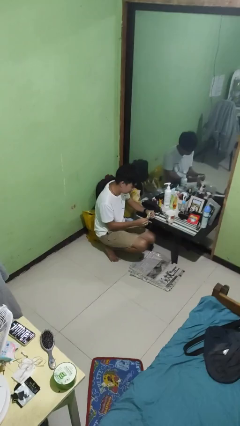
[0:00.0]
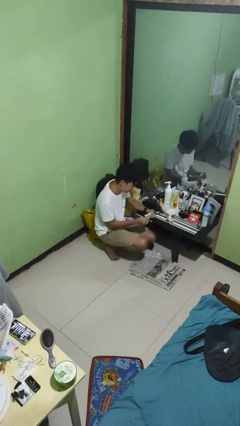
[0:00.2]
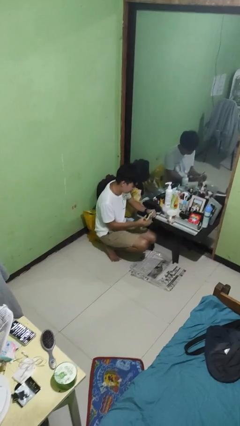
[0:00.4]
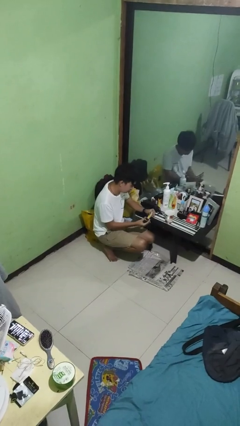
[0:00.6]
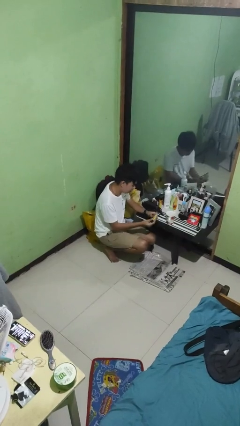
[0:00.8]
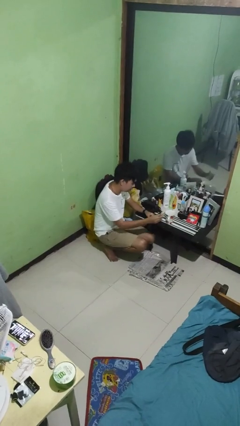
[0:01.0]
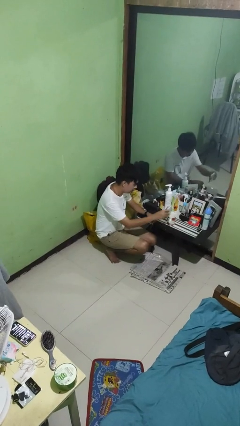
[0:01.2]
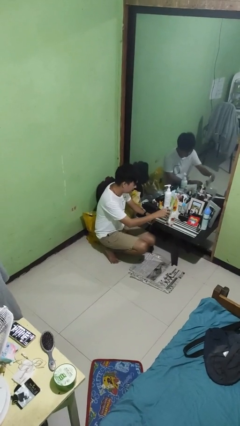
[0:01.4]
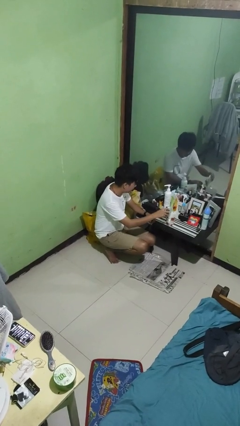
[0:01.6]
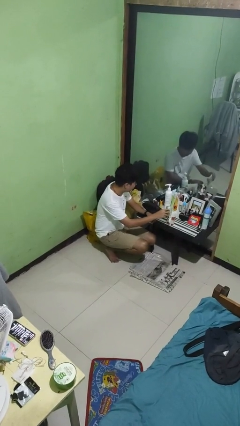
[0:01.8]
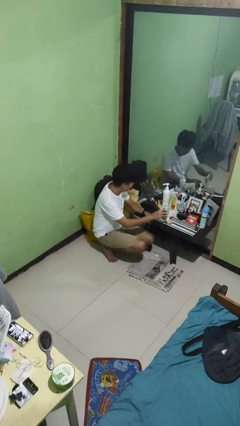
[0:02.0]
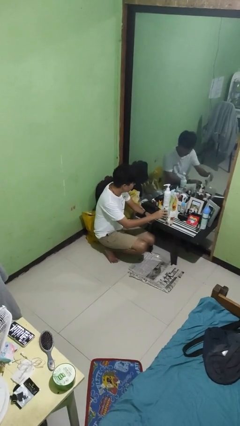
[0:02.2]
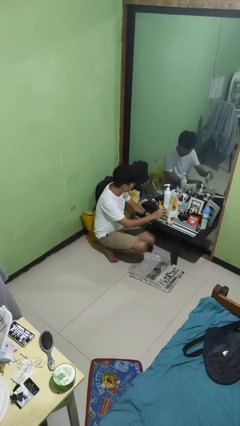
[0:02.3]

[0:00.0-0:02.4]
person pours coffee into mug

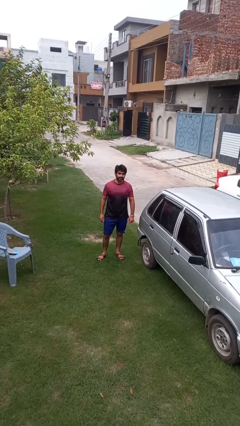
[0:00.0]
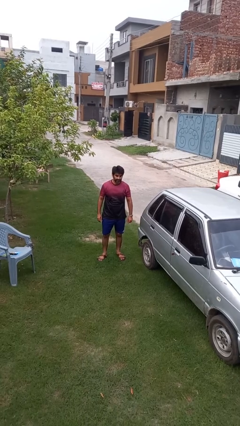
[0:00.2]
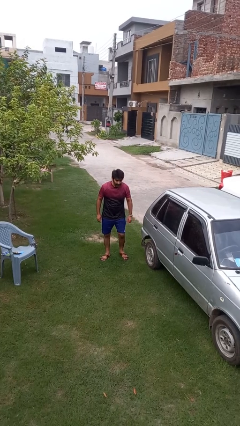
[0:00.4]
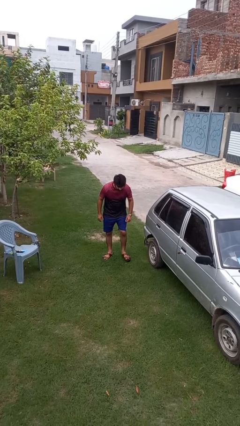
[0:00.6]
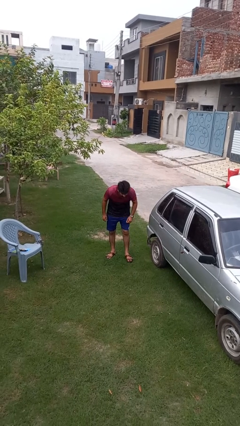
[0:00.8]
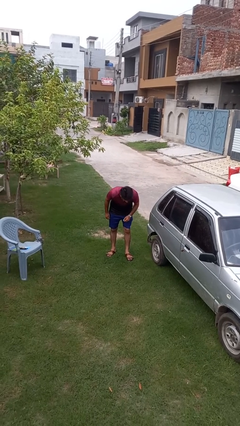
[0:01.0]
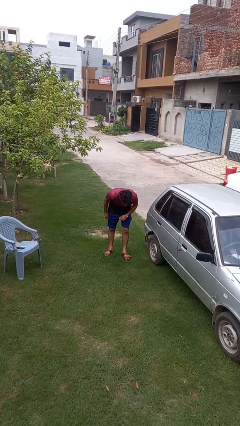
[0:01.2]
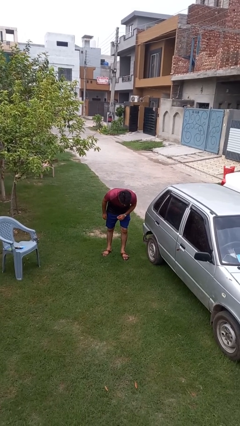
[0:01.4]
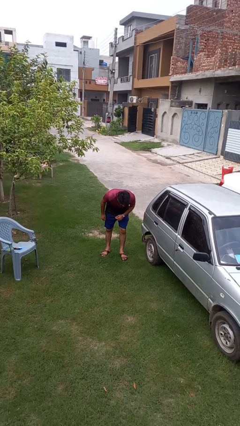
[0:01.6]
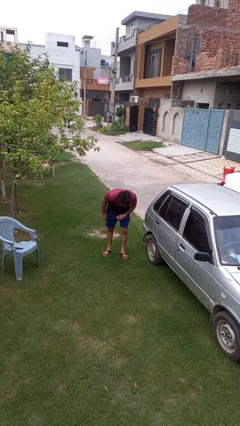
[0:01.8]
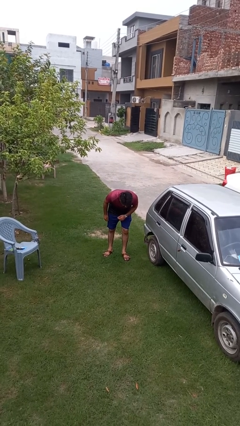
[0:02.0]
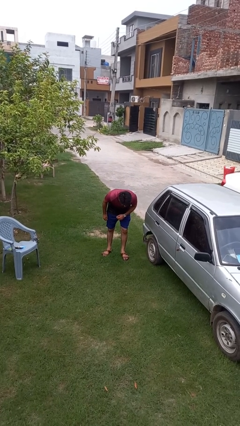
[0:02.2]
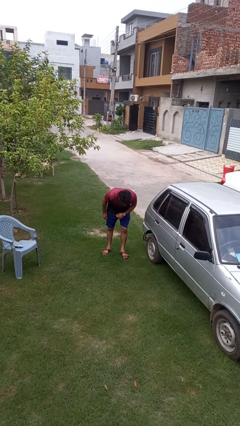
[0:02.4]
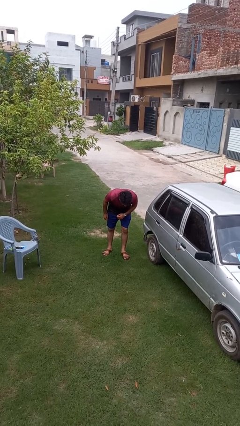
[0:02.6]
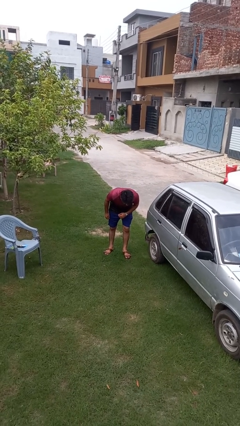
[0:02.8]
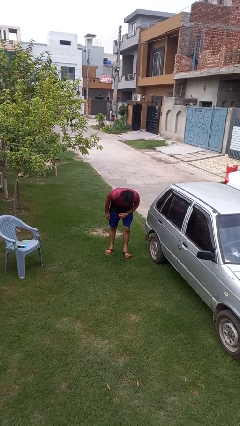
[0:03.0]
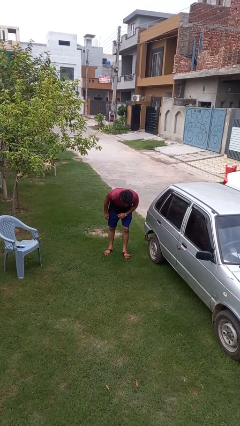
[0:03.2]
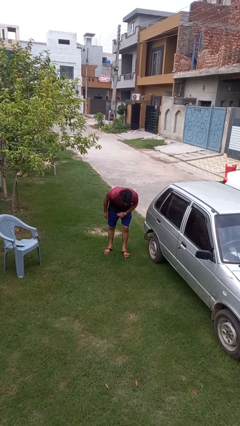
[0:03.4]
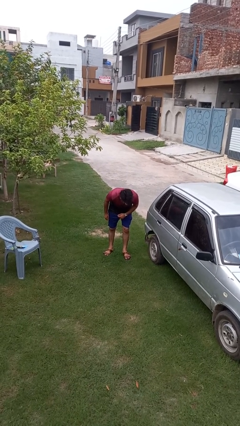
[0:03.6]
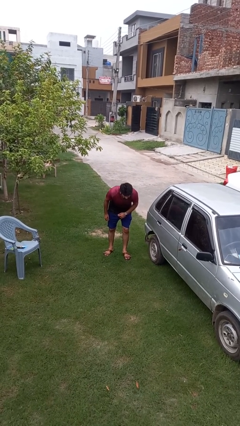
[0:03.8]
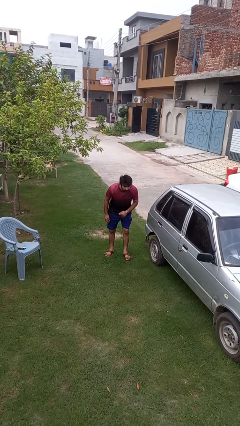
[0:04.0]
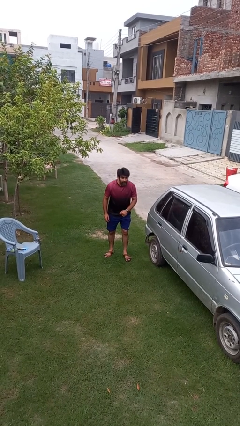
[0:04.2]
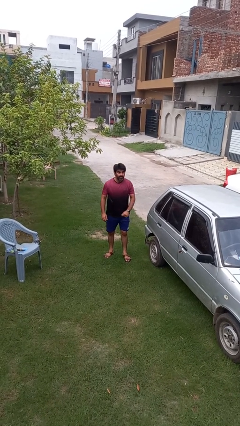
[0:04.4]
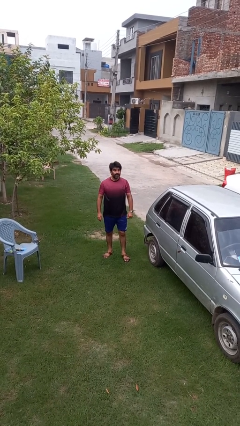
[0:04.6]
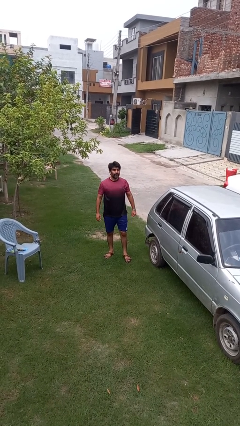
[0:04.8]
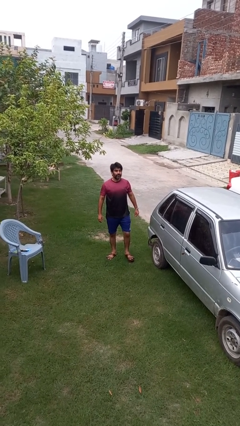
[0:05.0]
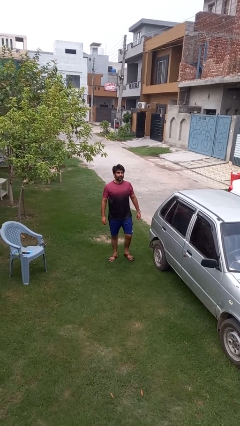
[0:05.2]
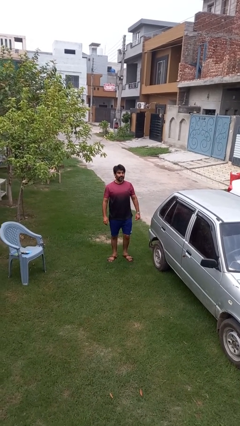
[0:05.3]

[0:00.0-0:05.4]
person bows

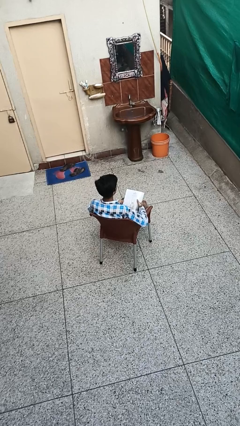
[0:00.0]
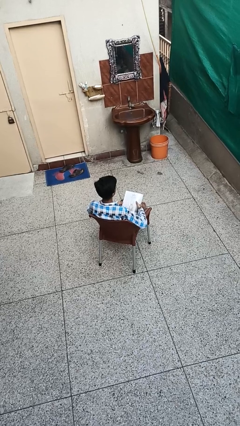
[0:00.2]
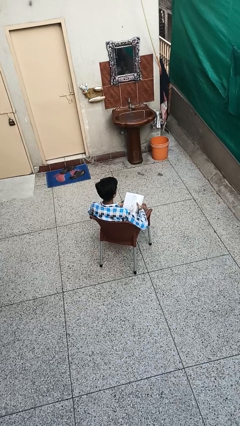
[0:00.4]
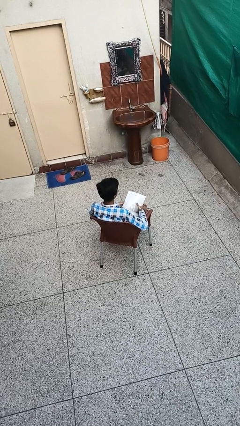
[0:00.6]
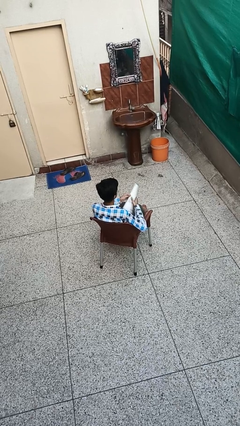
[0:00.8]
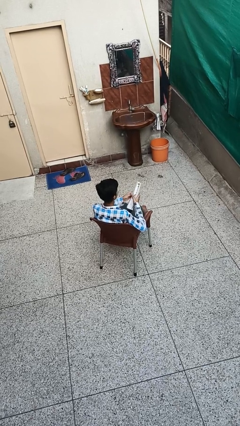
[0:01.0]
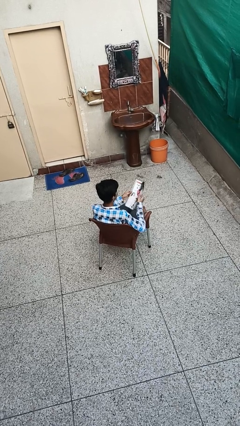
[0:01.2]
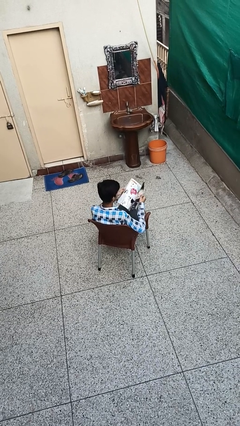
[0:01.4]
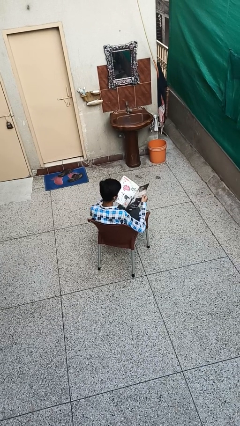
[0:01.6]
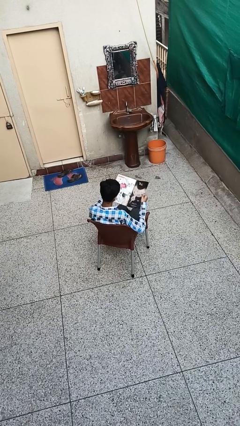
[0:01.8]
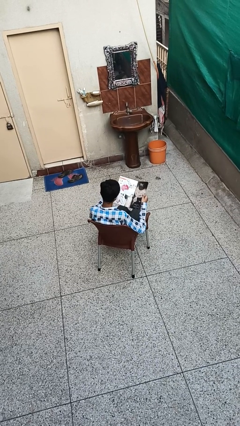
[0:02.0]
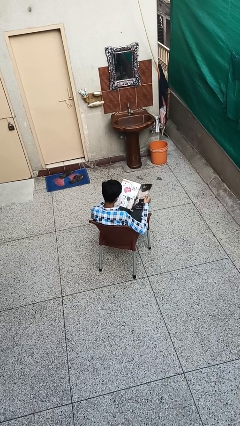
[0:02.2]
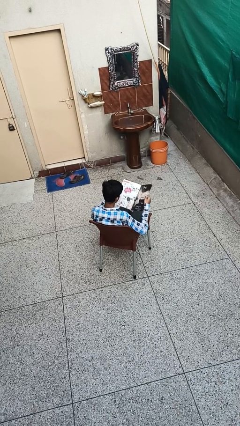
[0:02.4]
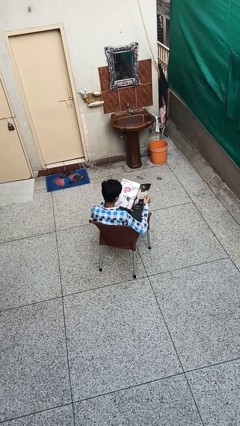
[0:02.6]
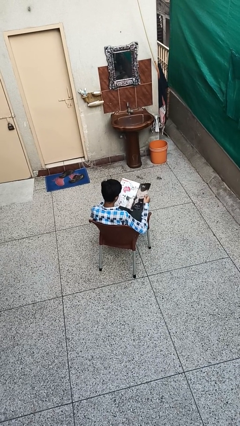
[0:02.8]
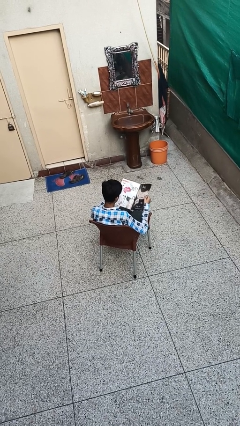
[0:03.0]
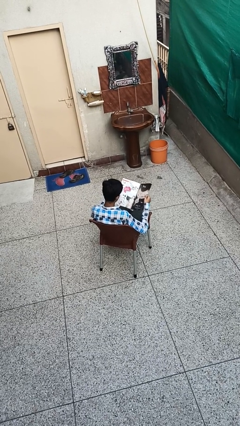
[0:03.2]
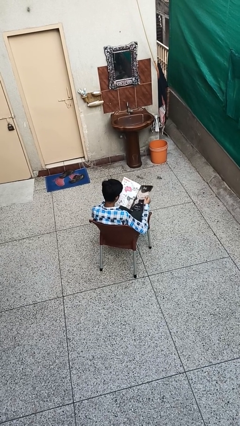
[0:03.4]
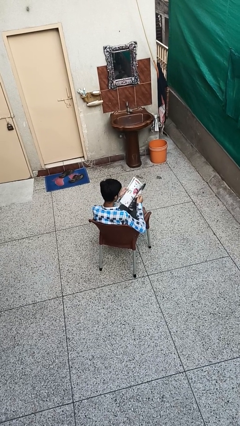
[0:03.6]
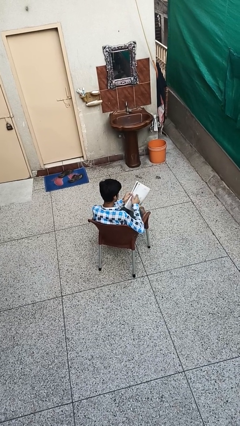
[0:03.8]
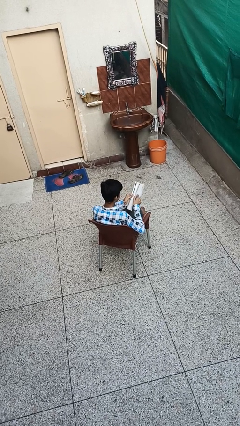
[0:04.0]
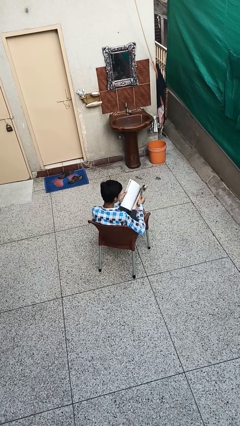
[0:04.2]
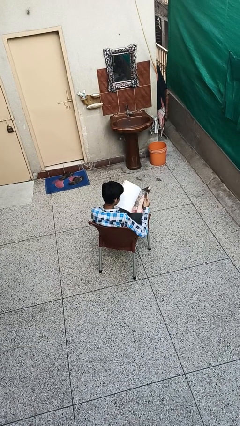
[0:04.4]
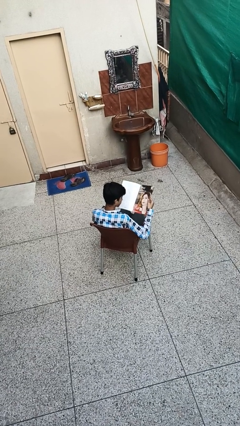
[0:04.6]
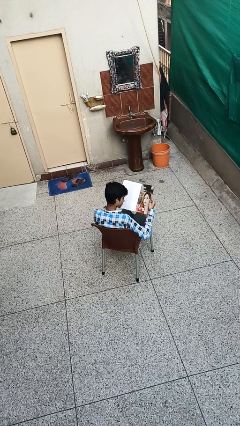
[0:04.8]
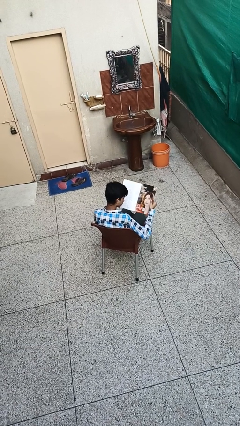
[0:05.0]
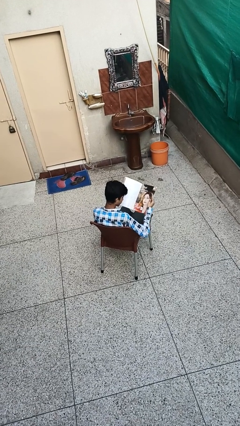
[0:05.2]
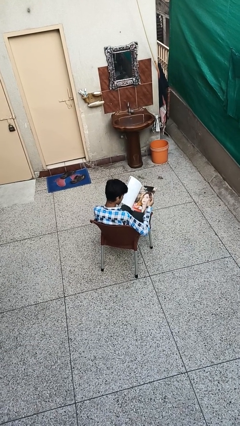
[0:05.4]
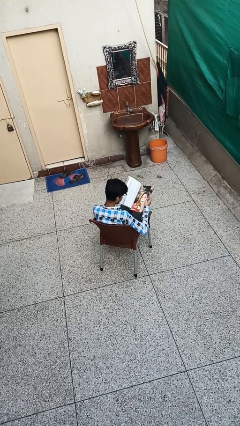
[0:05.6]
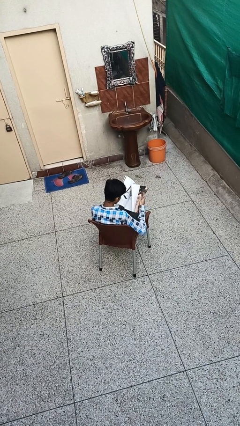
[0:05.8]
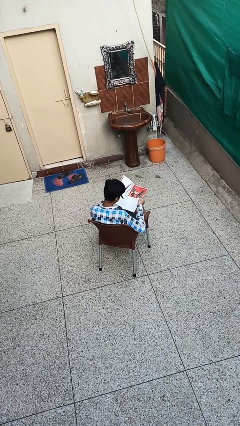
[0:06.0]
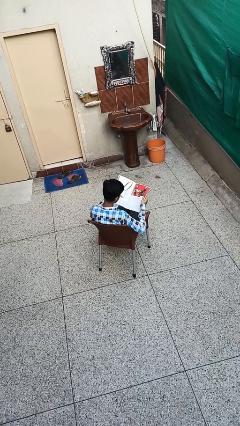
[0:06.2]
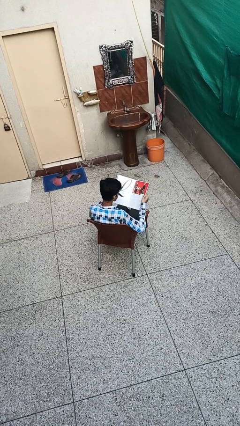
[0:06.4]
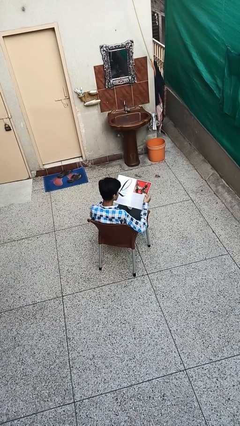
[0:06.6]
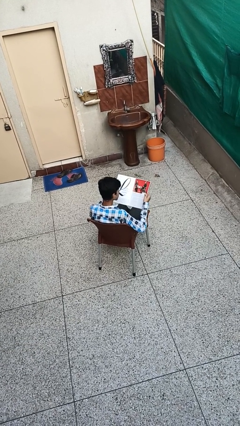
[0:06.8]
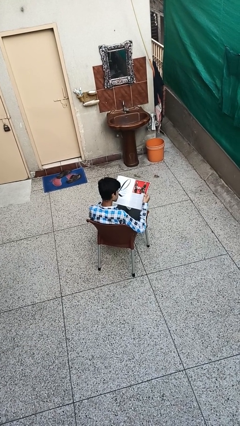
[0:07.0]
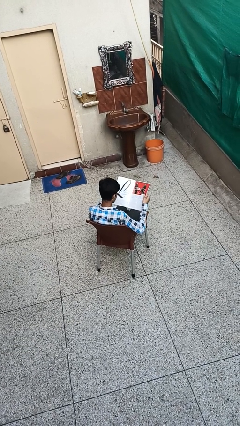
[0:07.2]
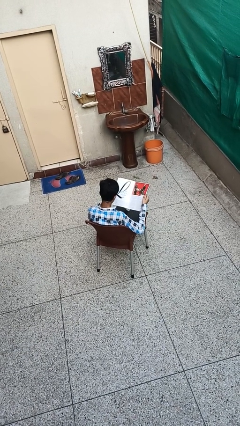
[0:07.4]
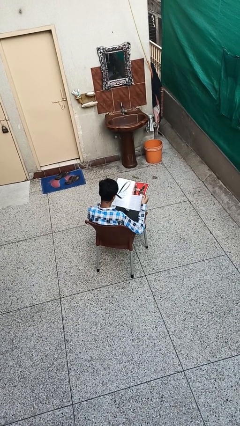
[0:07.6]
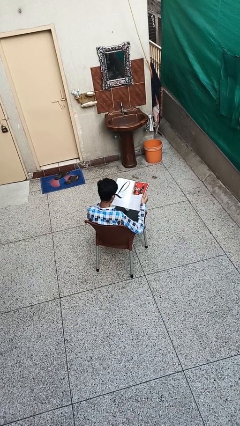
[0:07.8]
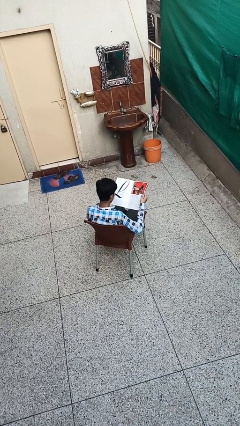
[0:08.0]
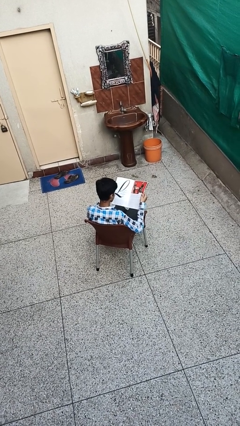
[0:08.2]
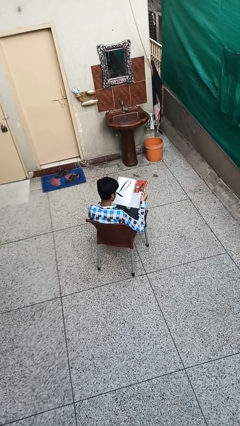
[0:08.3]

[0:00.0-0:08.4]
person reads magazine

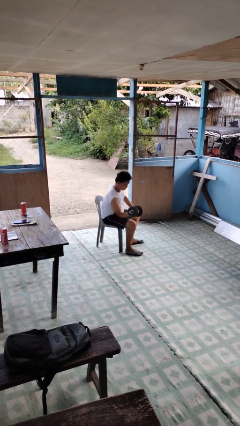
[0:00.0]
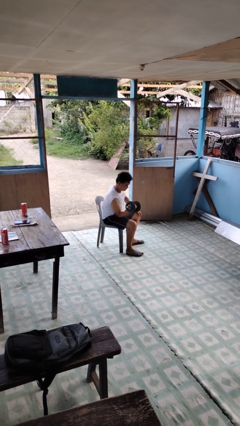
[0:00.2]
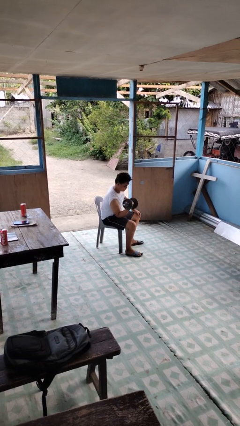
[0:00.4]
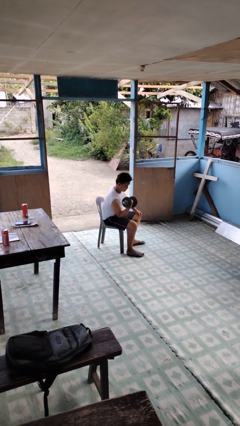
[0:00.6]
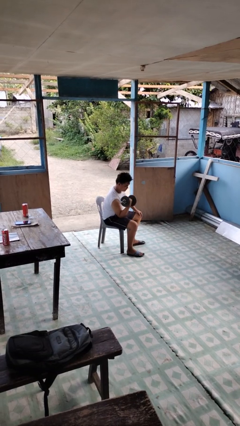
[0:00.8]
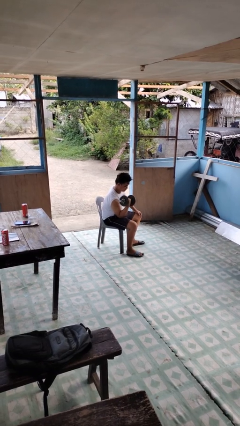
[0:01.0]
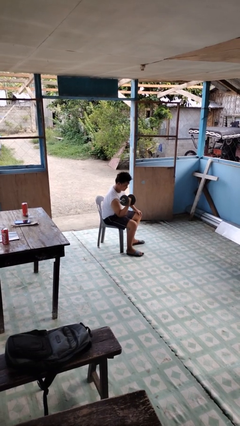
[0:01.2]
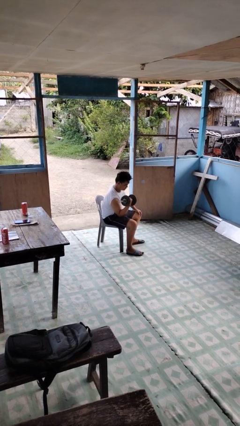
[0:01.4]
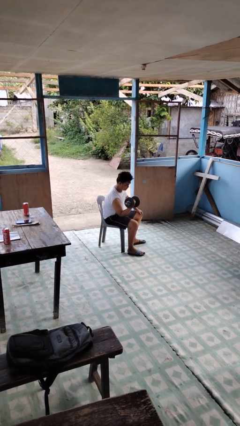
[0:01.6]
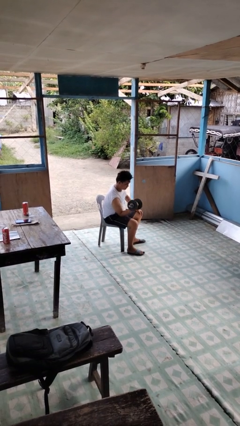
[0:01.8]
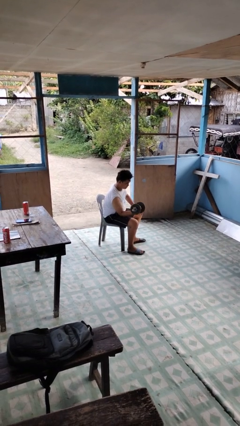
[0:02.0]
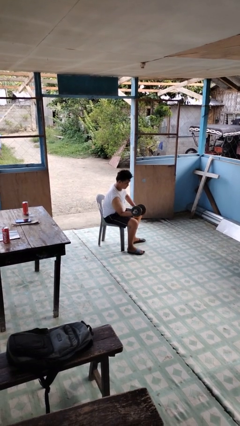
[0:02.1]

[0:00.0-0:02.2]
person lifts dumbbells
